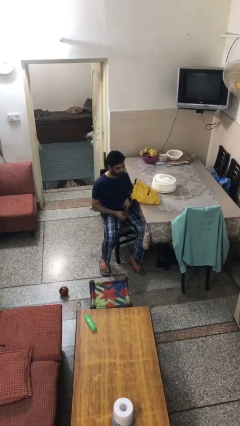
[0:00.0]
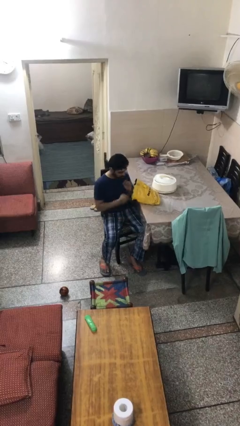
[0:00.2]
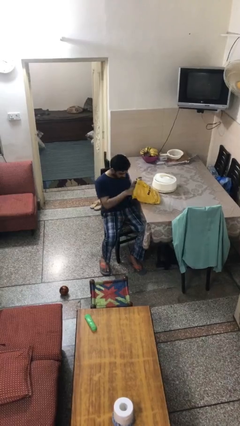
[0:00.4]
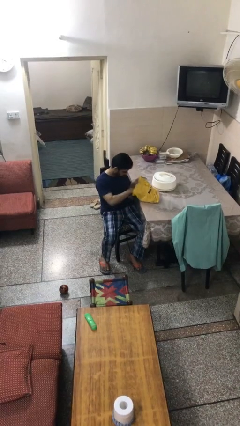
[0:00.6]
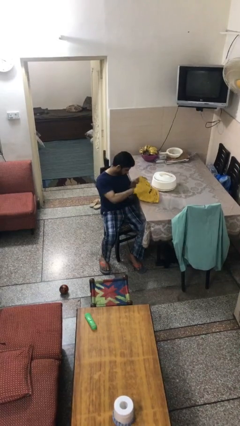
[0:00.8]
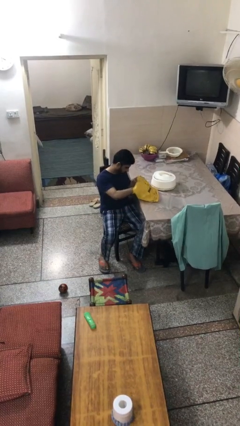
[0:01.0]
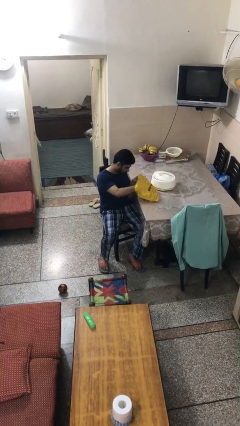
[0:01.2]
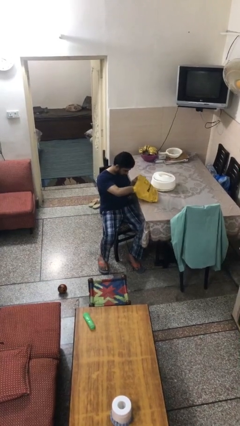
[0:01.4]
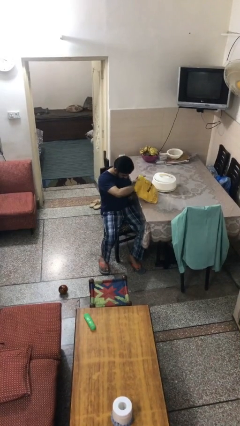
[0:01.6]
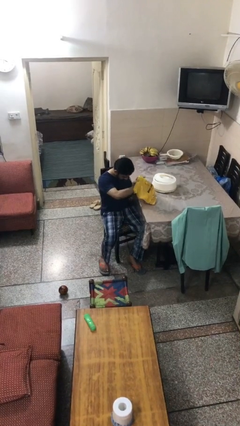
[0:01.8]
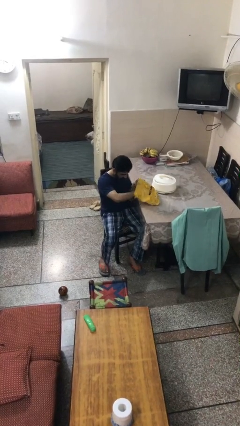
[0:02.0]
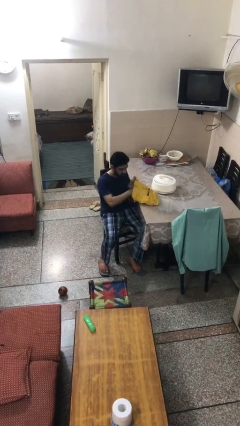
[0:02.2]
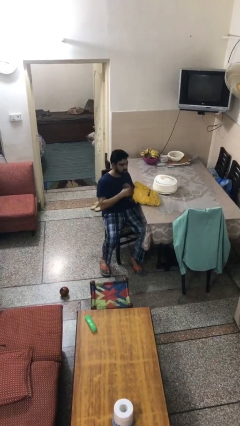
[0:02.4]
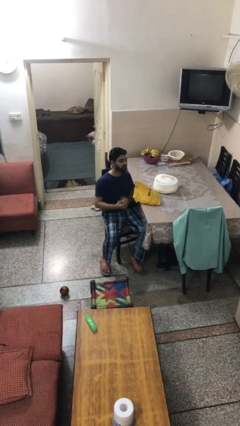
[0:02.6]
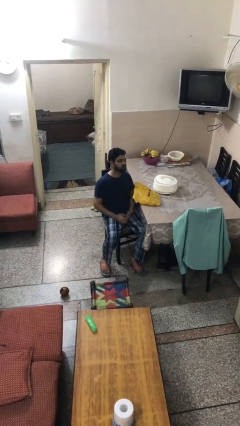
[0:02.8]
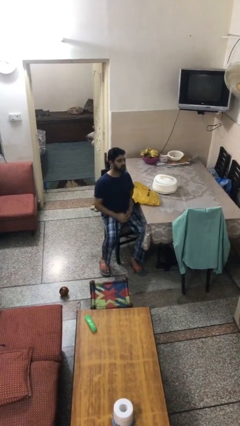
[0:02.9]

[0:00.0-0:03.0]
person searches in bag

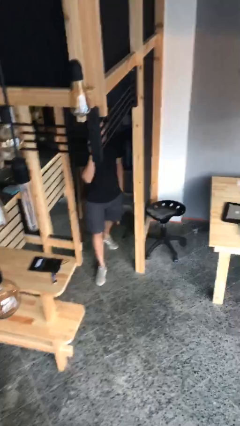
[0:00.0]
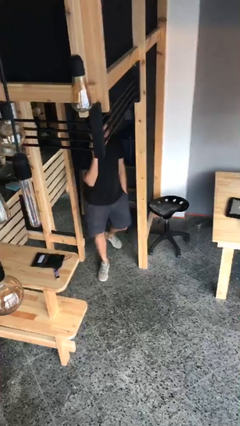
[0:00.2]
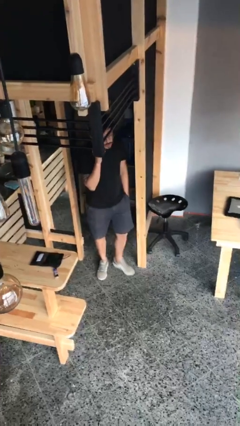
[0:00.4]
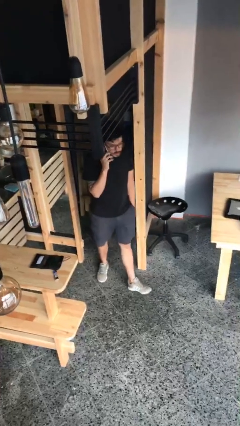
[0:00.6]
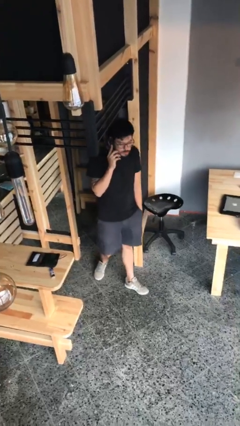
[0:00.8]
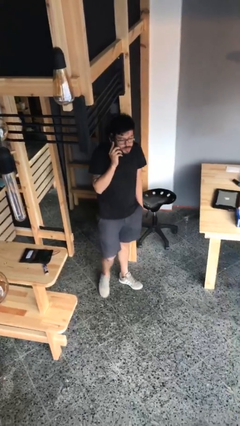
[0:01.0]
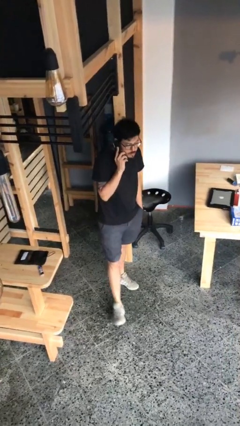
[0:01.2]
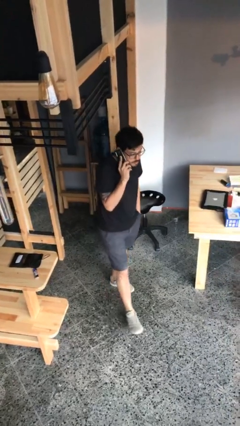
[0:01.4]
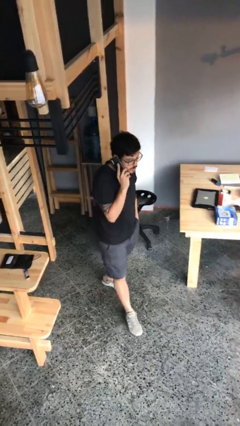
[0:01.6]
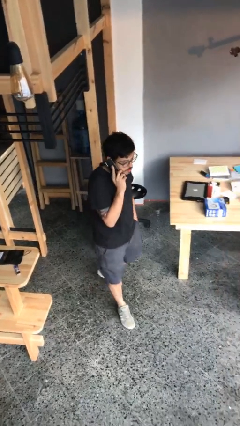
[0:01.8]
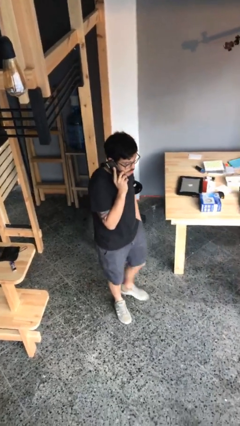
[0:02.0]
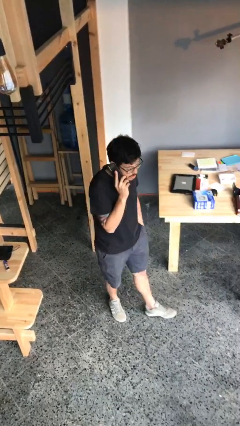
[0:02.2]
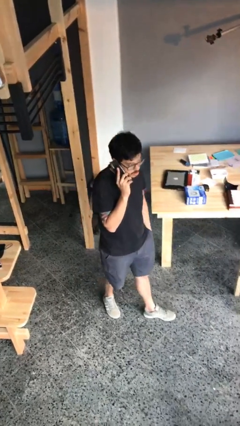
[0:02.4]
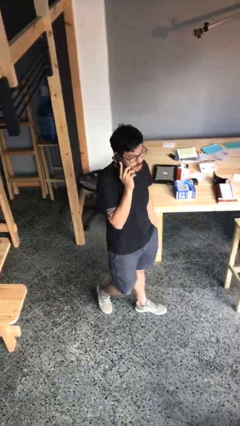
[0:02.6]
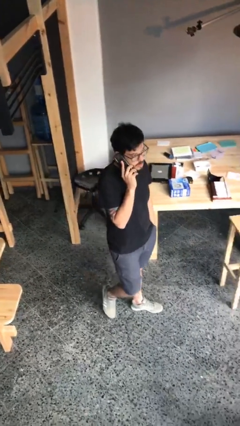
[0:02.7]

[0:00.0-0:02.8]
person enters scene through structure

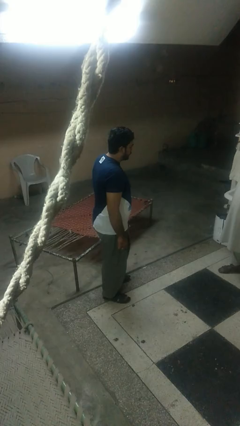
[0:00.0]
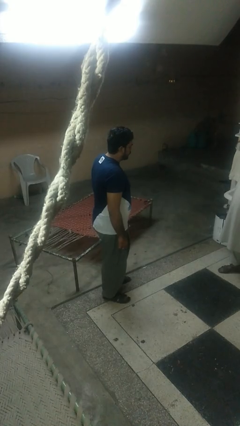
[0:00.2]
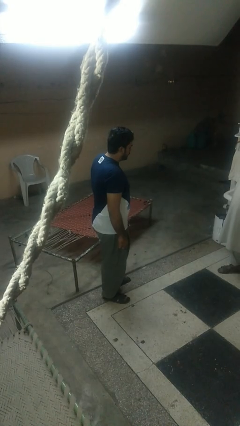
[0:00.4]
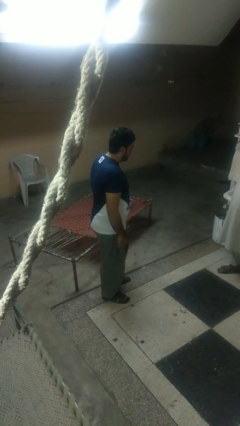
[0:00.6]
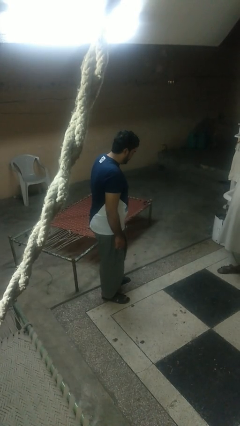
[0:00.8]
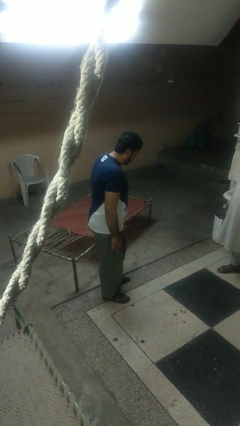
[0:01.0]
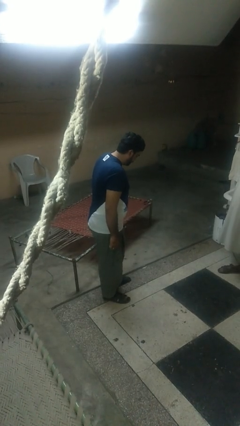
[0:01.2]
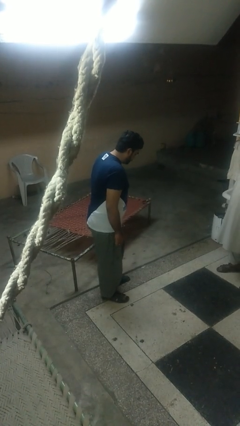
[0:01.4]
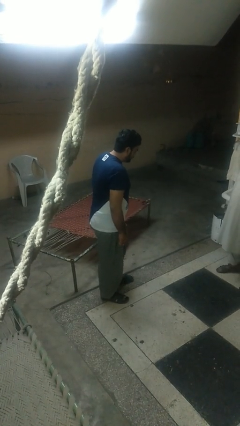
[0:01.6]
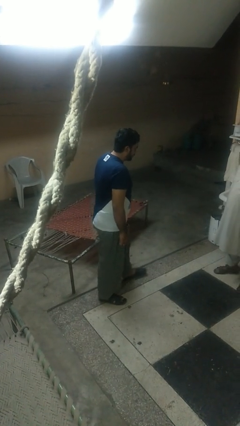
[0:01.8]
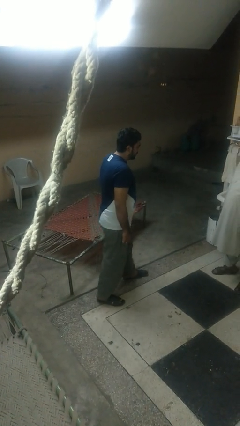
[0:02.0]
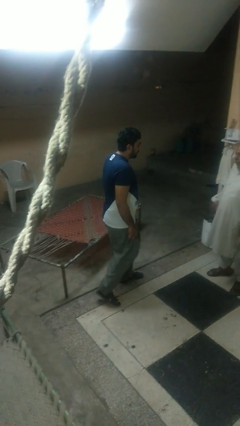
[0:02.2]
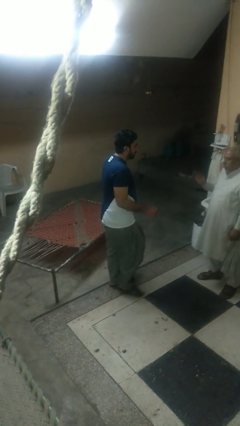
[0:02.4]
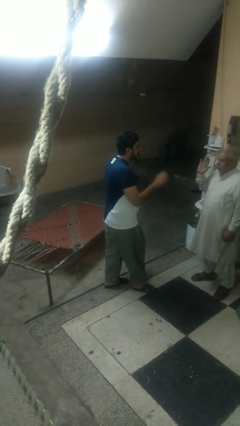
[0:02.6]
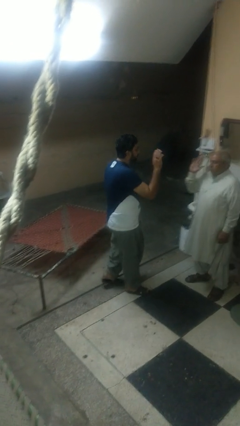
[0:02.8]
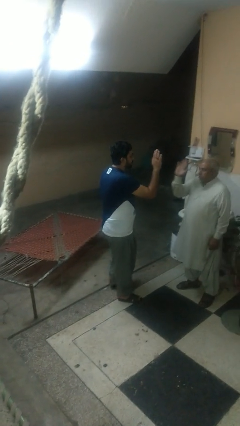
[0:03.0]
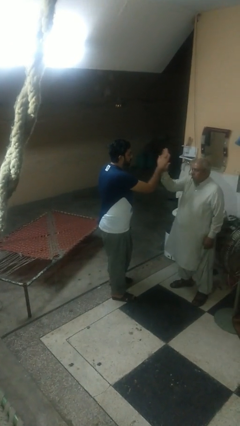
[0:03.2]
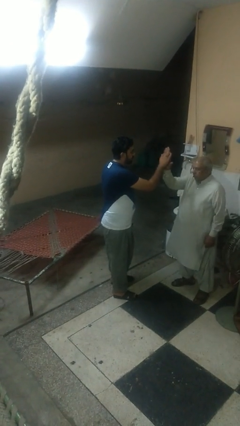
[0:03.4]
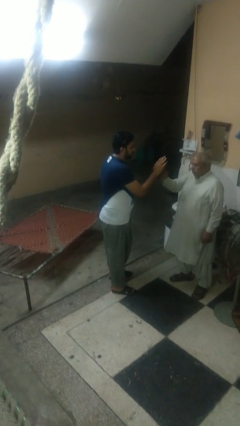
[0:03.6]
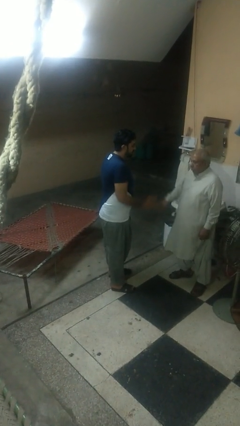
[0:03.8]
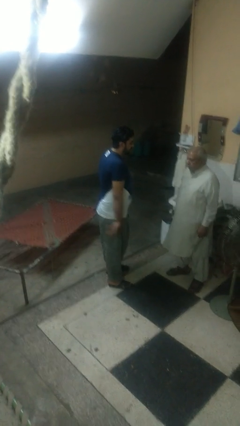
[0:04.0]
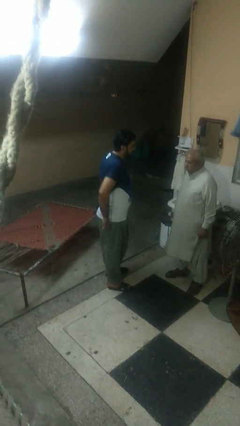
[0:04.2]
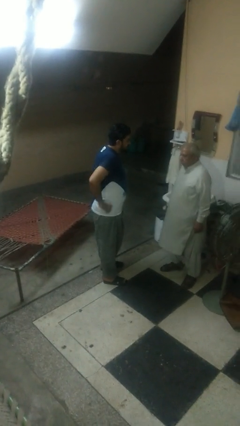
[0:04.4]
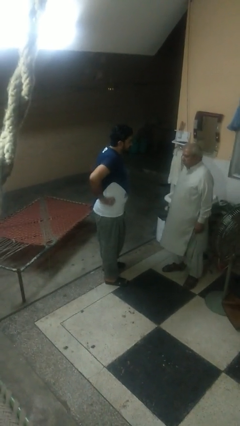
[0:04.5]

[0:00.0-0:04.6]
person highfives hand

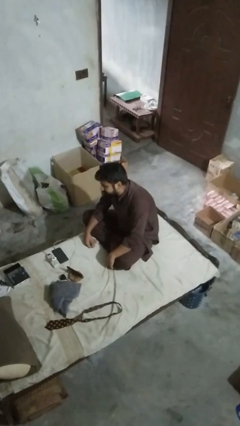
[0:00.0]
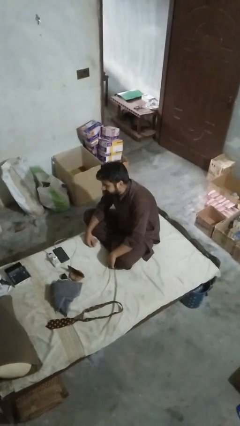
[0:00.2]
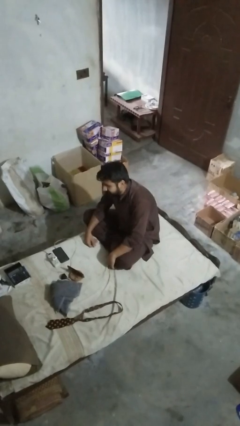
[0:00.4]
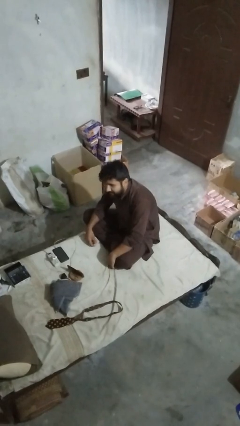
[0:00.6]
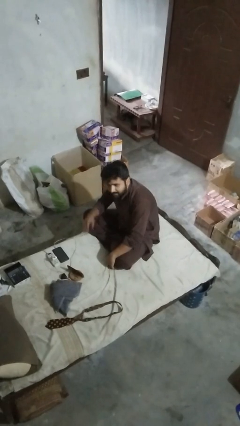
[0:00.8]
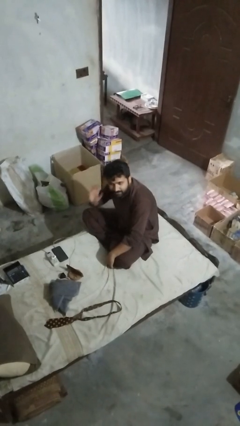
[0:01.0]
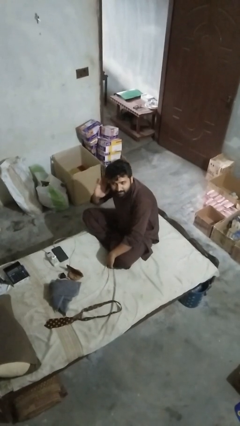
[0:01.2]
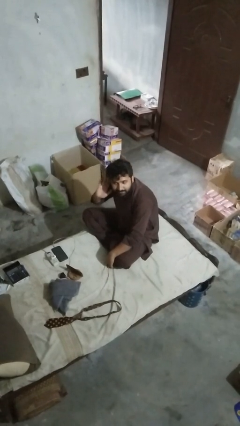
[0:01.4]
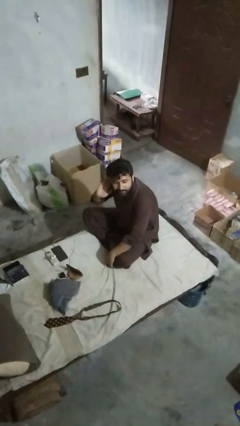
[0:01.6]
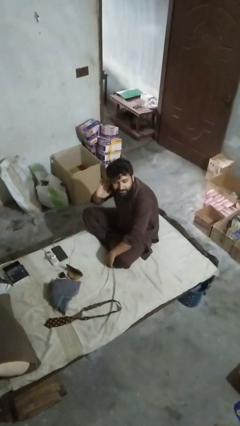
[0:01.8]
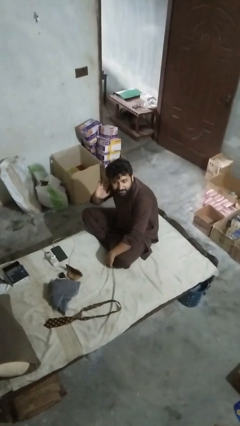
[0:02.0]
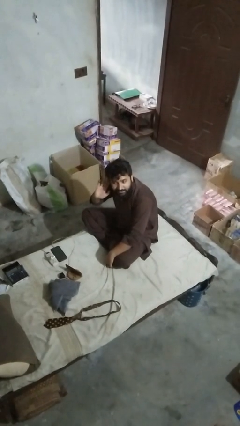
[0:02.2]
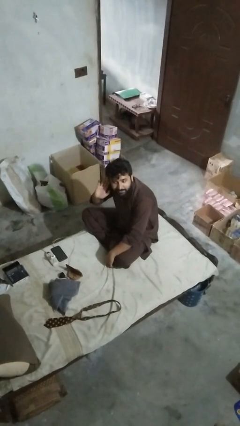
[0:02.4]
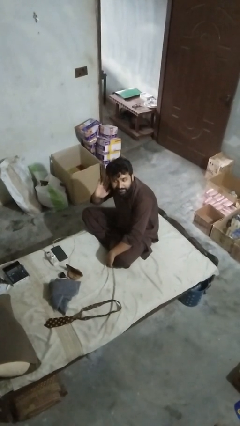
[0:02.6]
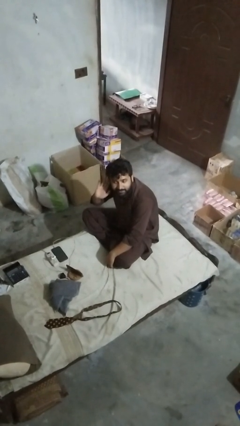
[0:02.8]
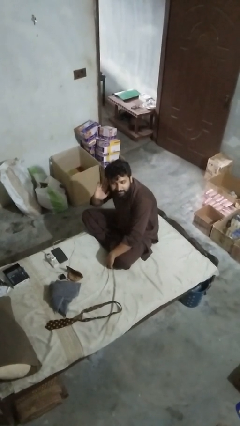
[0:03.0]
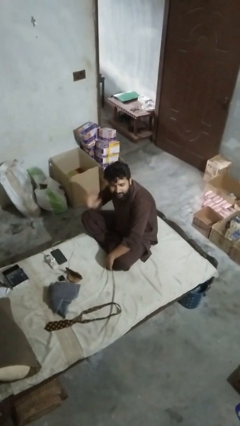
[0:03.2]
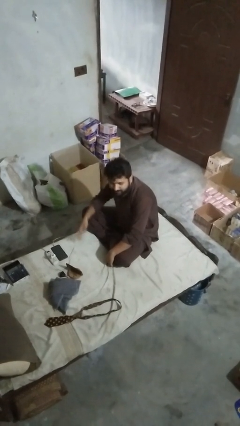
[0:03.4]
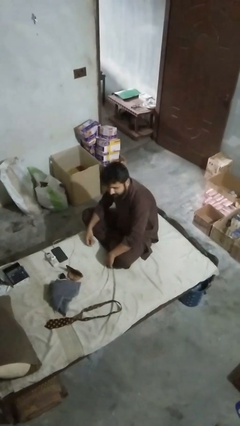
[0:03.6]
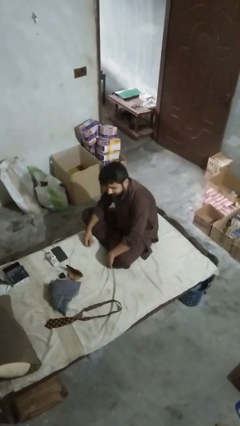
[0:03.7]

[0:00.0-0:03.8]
person gestures listen closely

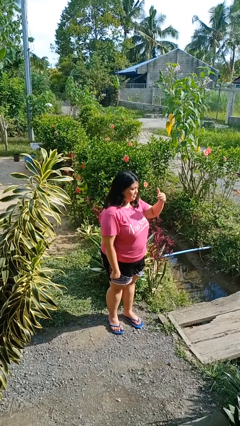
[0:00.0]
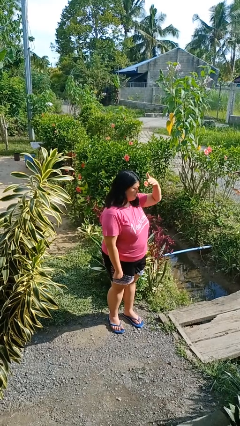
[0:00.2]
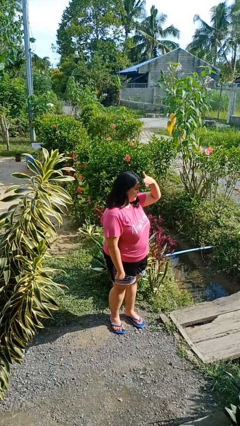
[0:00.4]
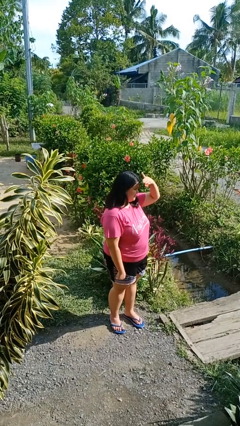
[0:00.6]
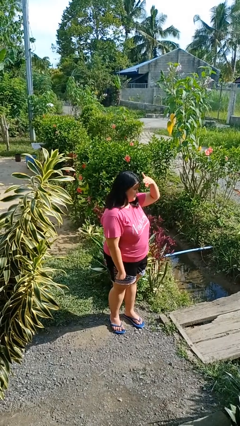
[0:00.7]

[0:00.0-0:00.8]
person shades eyes

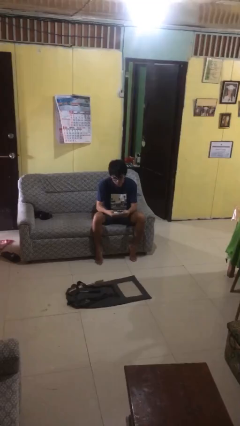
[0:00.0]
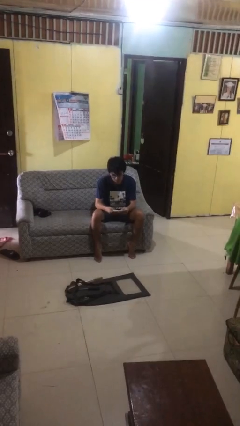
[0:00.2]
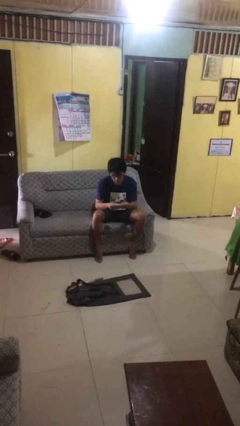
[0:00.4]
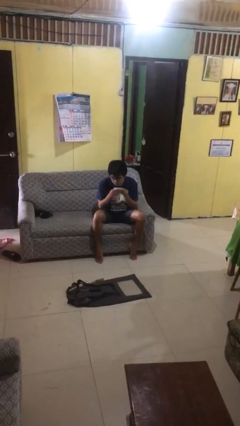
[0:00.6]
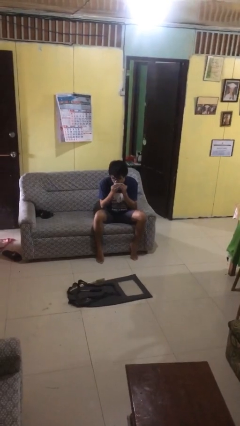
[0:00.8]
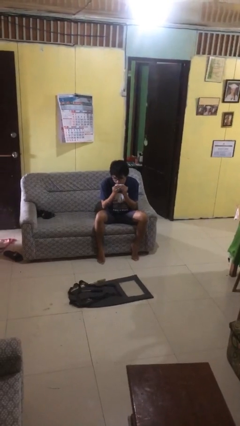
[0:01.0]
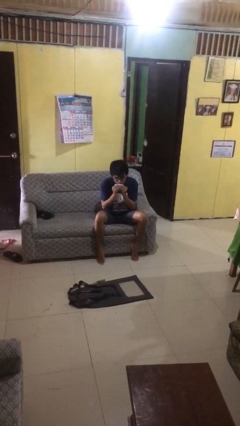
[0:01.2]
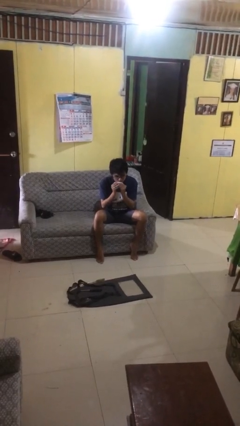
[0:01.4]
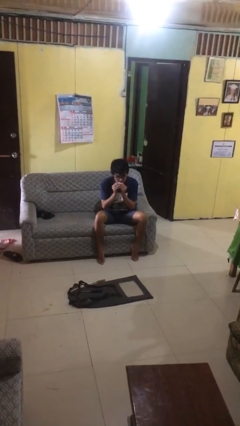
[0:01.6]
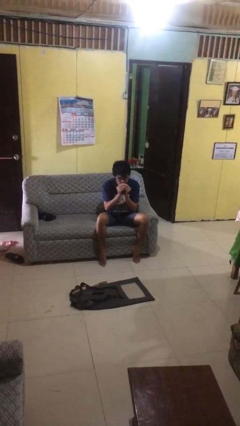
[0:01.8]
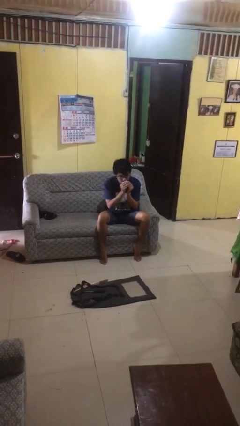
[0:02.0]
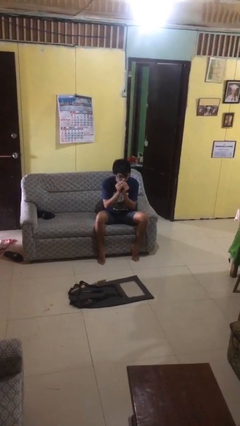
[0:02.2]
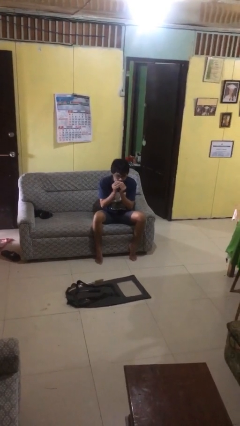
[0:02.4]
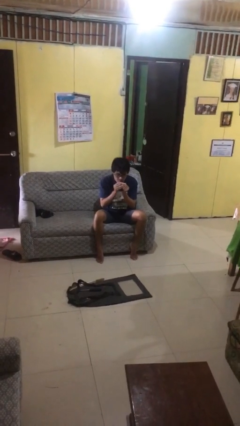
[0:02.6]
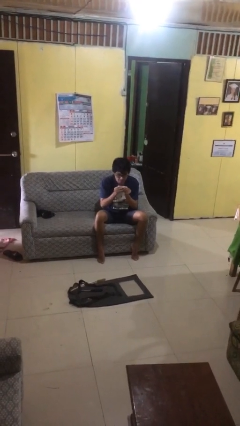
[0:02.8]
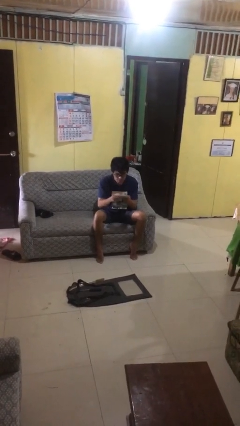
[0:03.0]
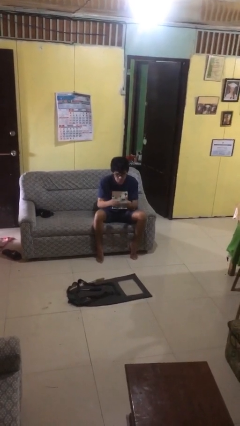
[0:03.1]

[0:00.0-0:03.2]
person wipes mouth with napkin
